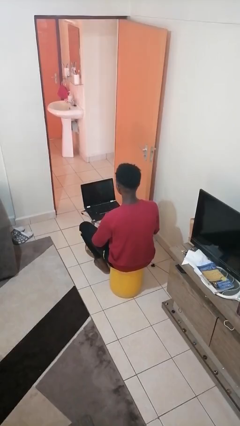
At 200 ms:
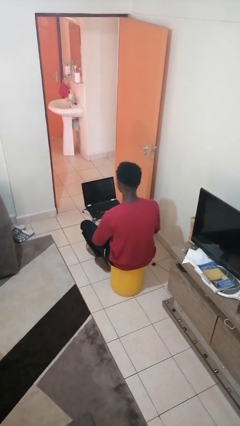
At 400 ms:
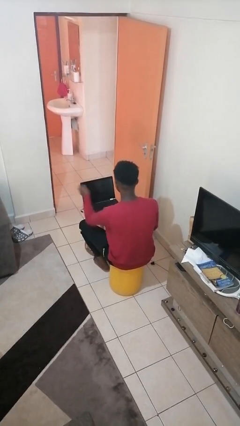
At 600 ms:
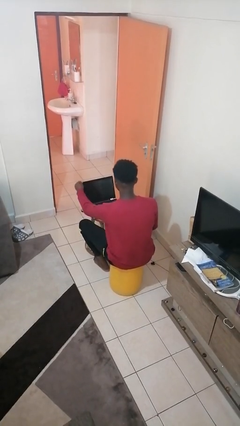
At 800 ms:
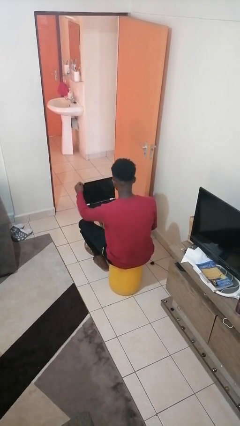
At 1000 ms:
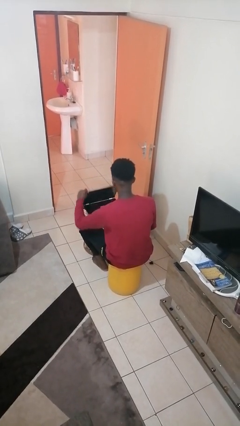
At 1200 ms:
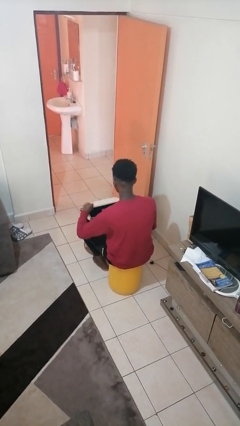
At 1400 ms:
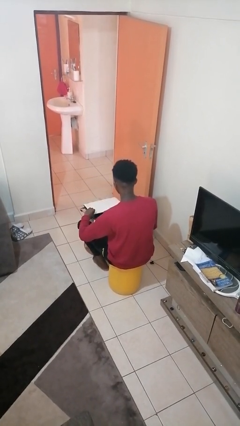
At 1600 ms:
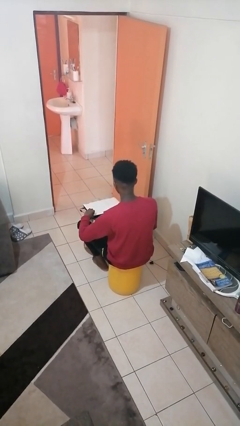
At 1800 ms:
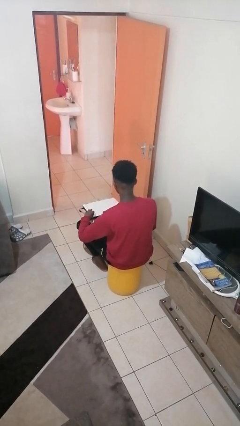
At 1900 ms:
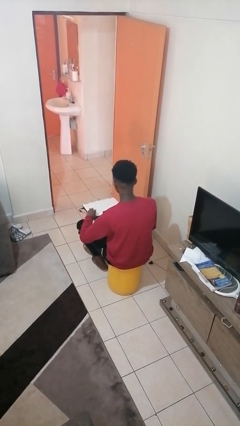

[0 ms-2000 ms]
person closes laptop

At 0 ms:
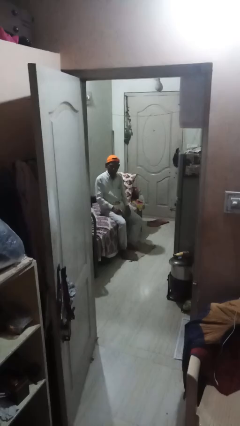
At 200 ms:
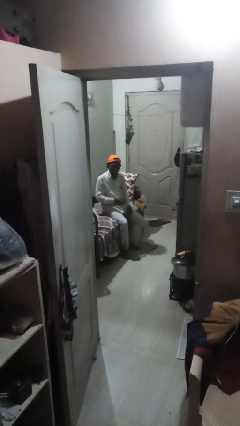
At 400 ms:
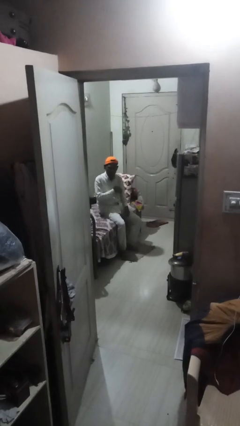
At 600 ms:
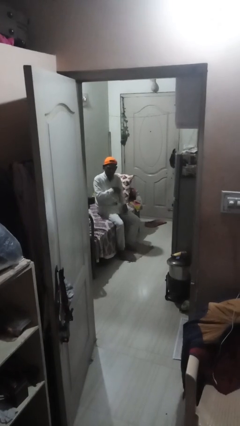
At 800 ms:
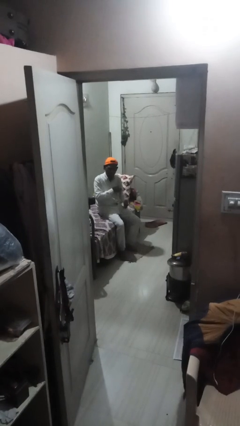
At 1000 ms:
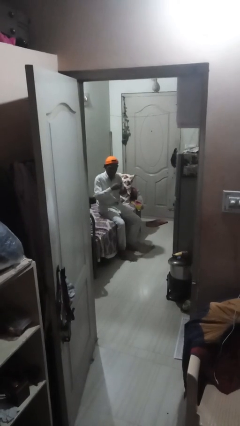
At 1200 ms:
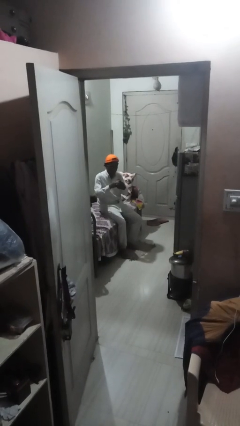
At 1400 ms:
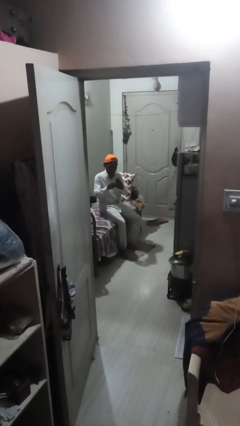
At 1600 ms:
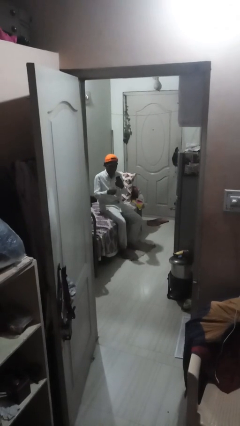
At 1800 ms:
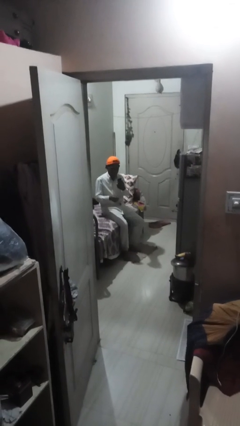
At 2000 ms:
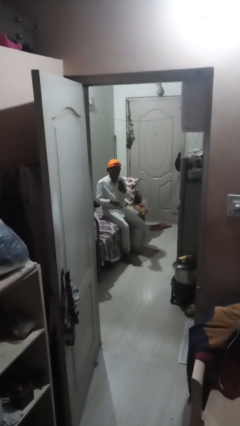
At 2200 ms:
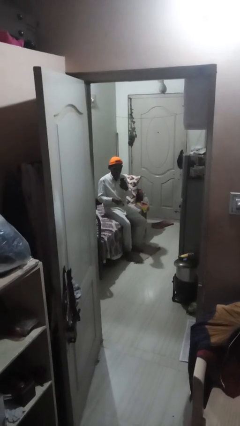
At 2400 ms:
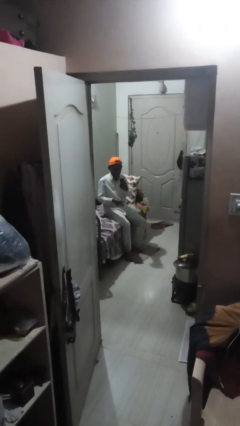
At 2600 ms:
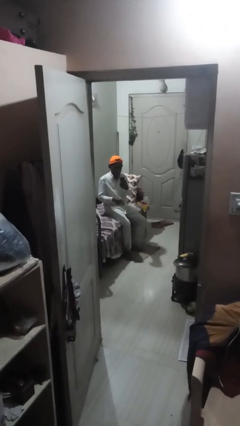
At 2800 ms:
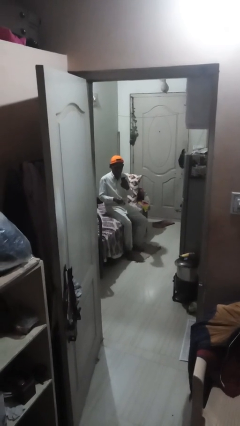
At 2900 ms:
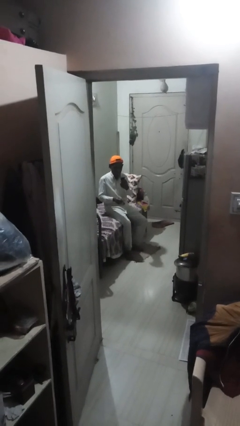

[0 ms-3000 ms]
person takes phone from pocket

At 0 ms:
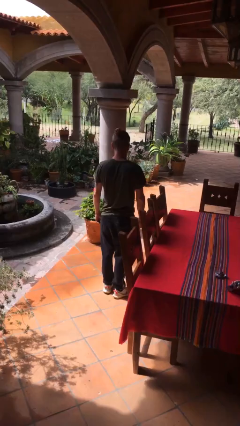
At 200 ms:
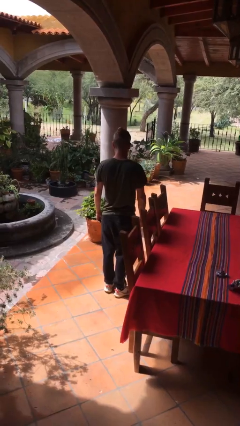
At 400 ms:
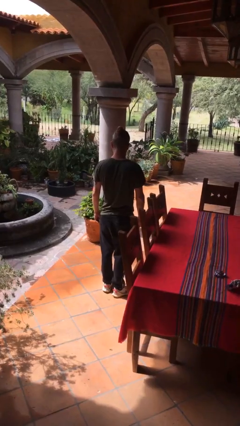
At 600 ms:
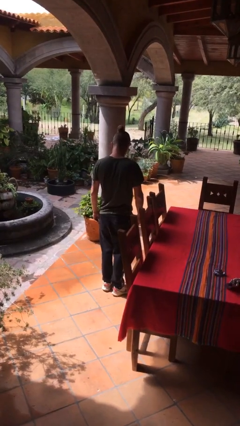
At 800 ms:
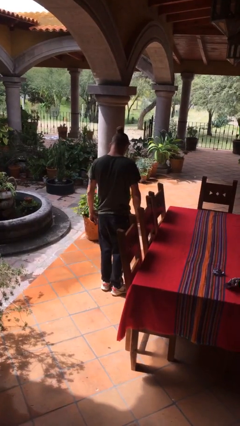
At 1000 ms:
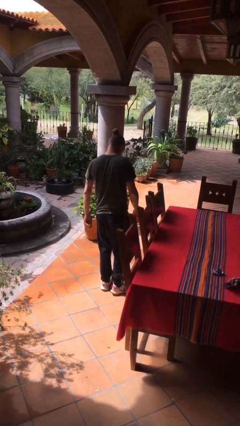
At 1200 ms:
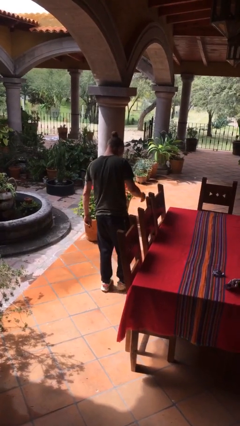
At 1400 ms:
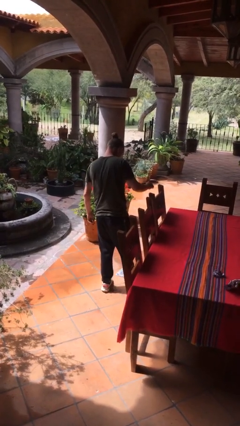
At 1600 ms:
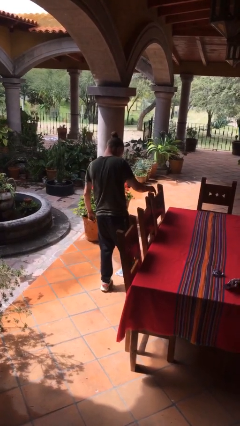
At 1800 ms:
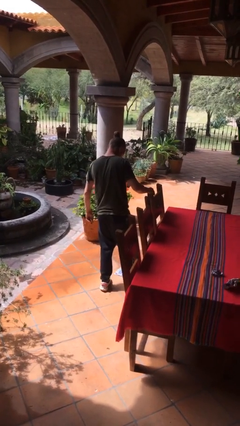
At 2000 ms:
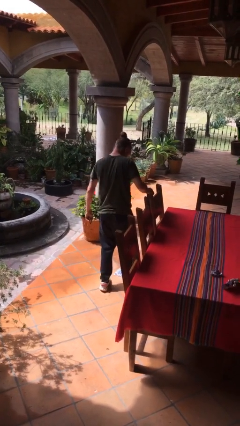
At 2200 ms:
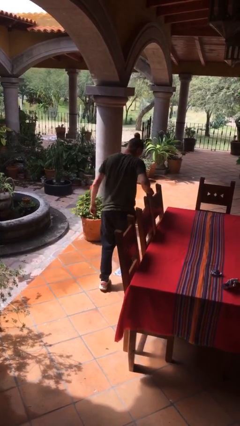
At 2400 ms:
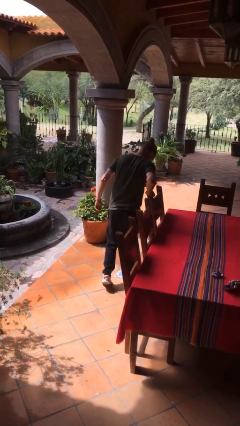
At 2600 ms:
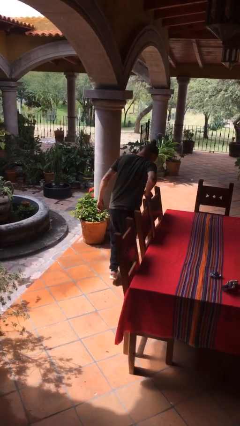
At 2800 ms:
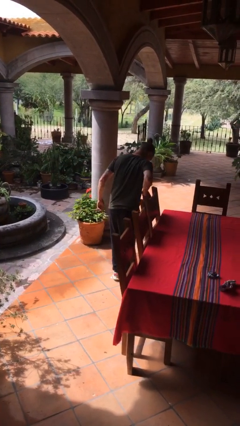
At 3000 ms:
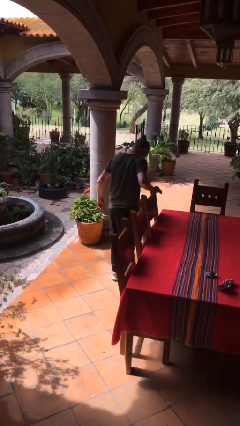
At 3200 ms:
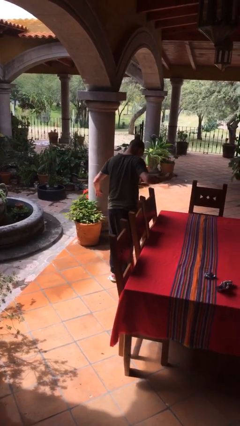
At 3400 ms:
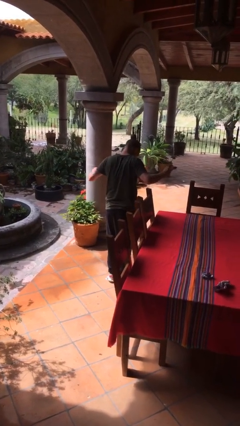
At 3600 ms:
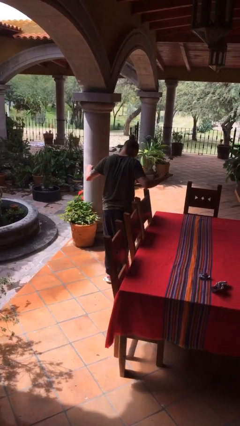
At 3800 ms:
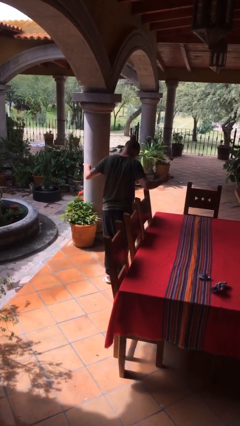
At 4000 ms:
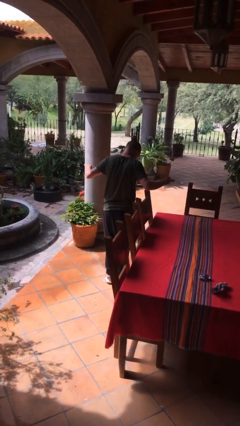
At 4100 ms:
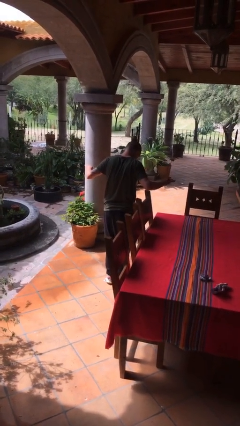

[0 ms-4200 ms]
person uses bodyweight scale

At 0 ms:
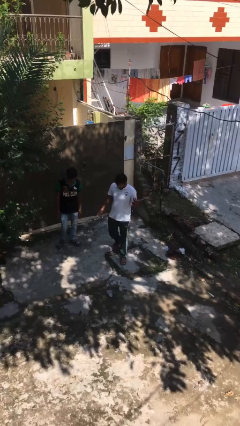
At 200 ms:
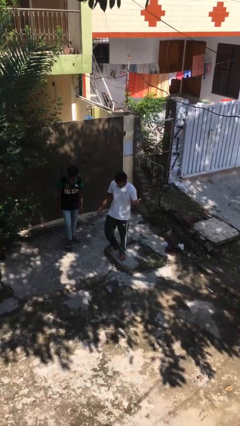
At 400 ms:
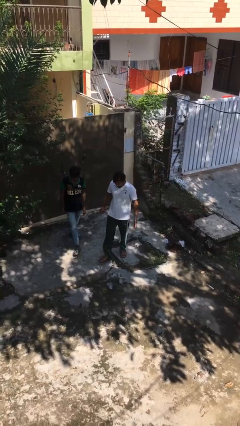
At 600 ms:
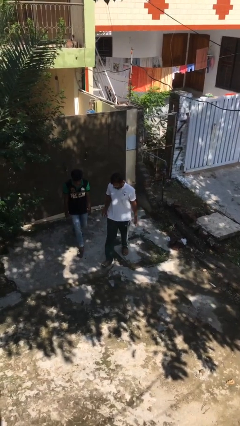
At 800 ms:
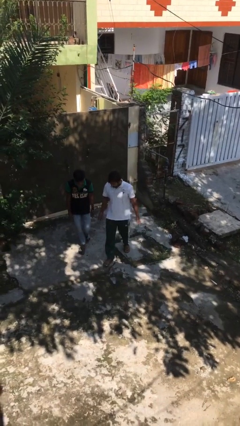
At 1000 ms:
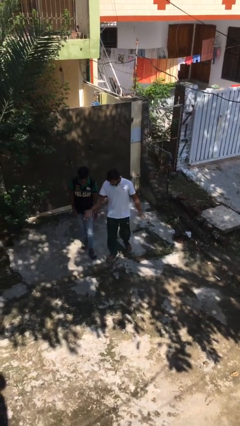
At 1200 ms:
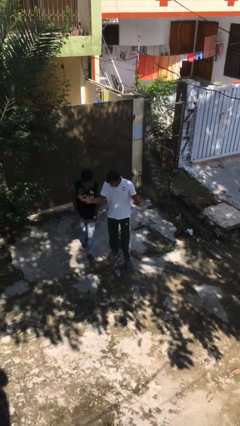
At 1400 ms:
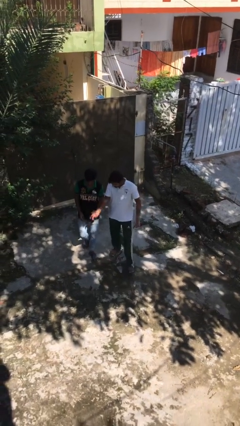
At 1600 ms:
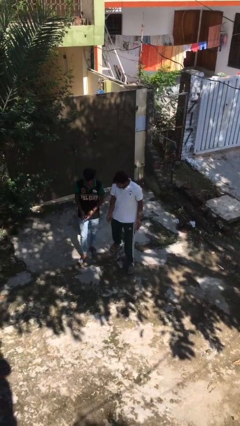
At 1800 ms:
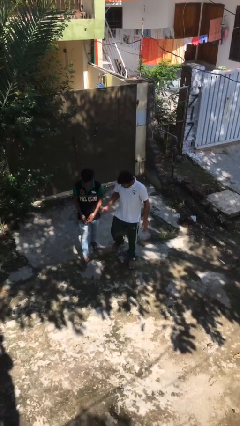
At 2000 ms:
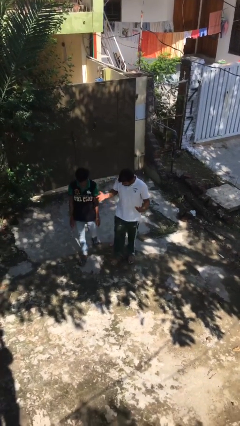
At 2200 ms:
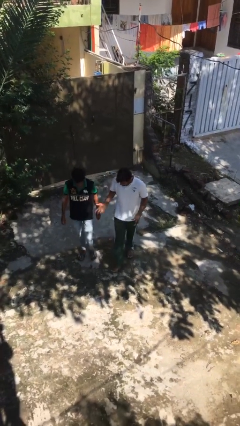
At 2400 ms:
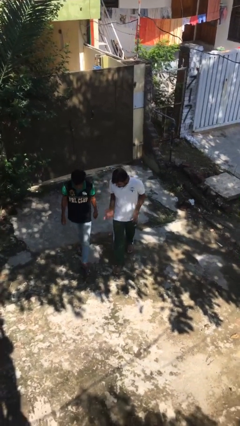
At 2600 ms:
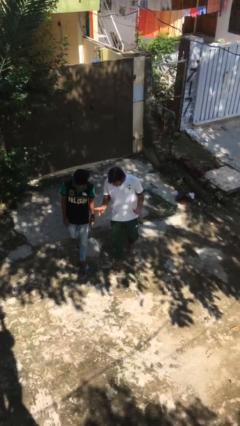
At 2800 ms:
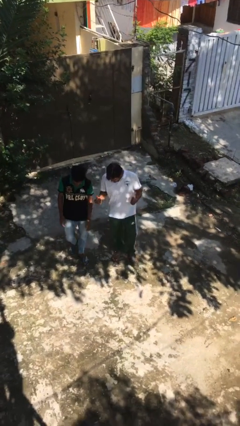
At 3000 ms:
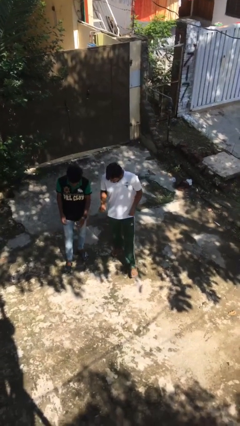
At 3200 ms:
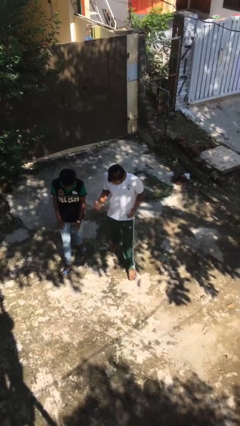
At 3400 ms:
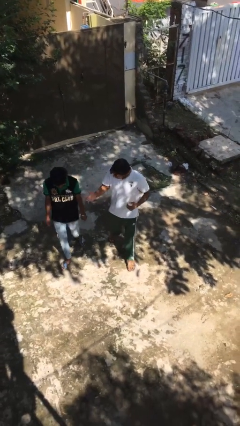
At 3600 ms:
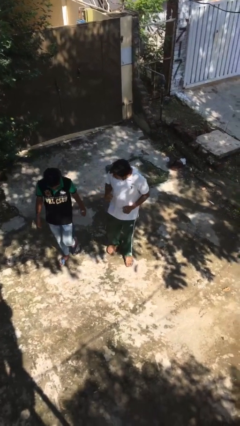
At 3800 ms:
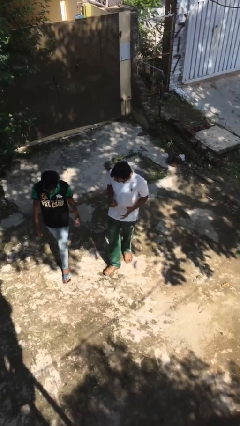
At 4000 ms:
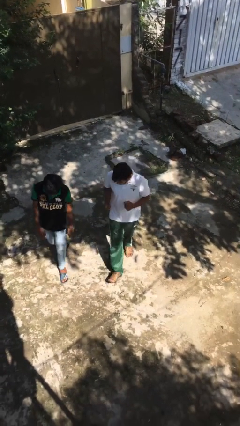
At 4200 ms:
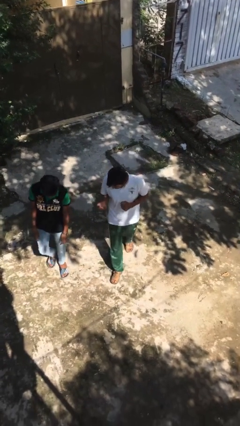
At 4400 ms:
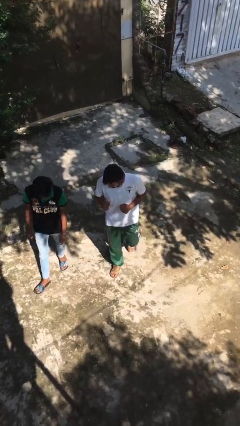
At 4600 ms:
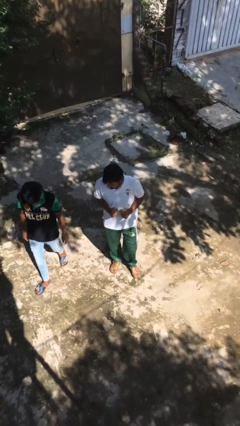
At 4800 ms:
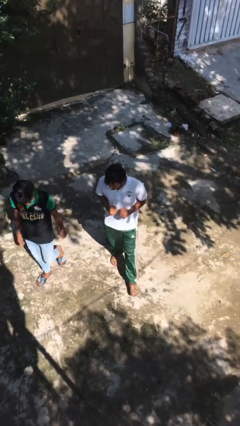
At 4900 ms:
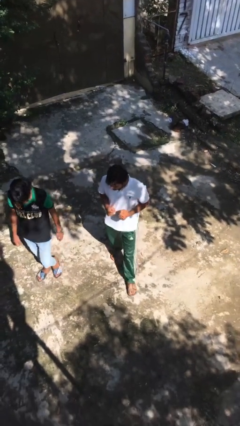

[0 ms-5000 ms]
person talks to person

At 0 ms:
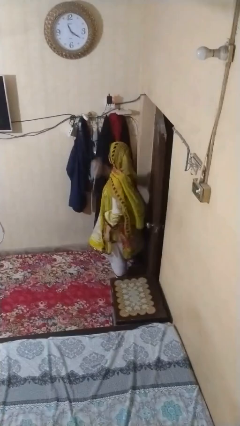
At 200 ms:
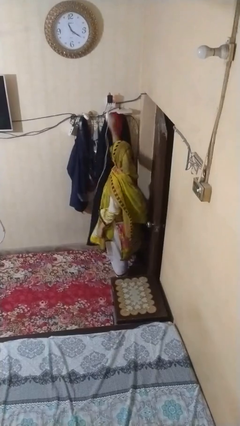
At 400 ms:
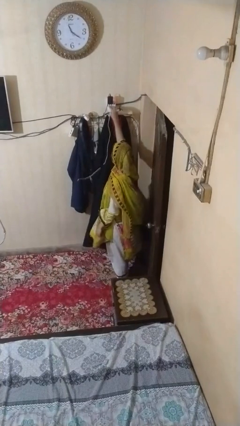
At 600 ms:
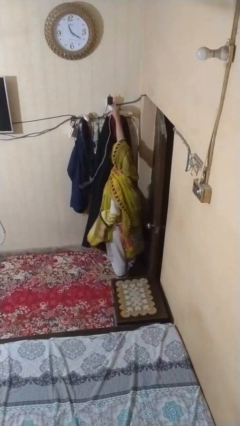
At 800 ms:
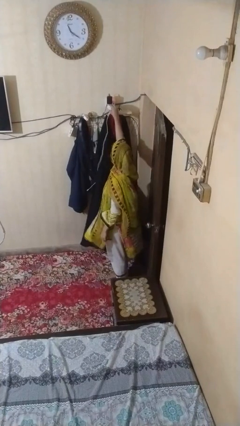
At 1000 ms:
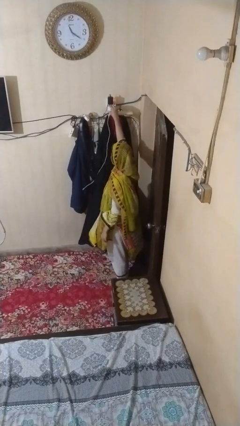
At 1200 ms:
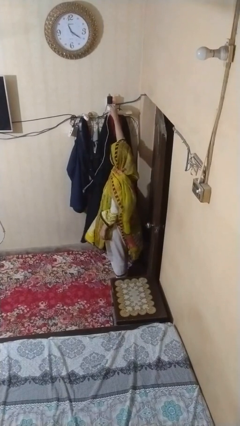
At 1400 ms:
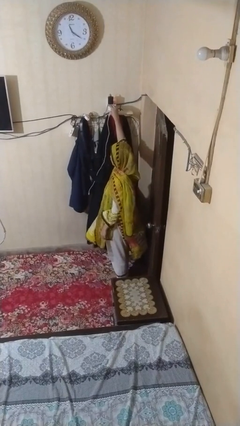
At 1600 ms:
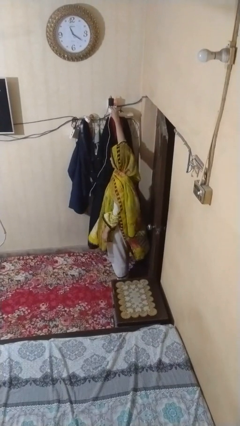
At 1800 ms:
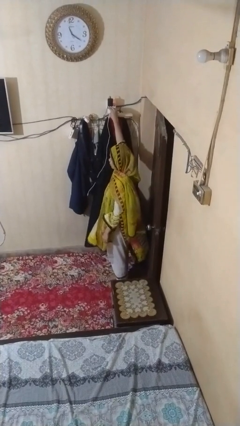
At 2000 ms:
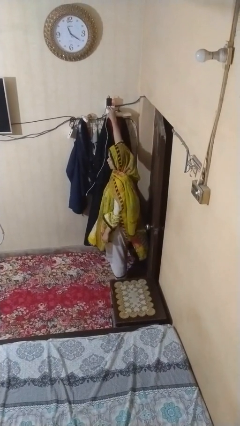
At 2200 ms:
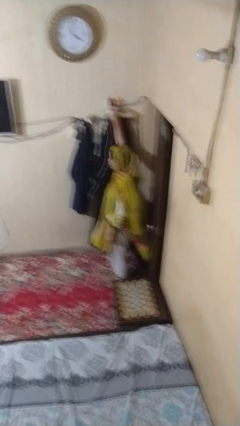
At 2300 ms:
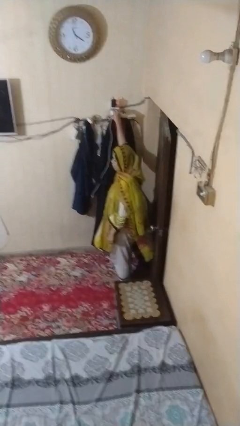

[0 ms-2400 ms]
person plugs into electrical socket

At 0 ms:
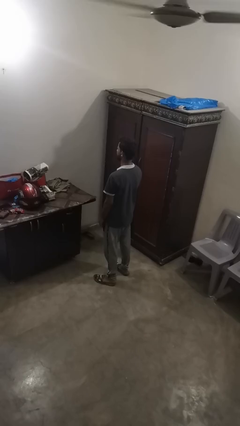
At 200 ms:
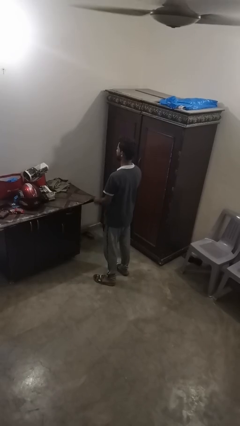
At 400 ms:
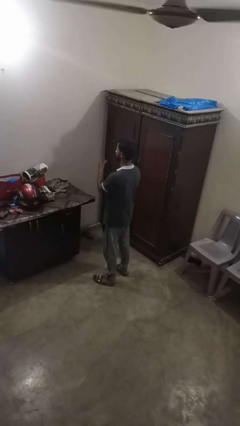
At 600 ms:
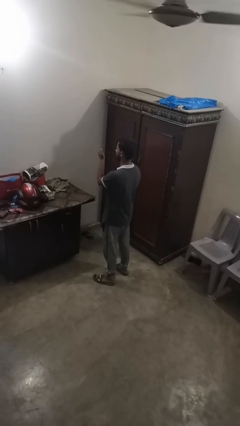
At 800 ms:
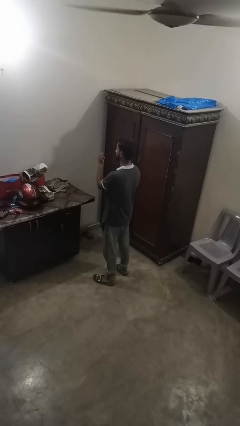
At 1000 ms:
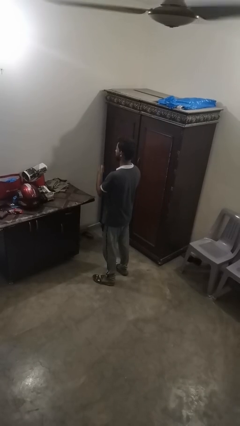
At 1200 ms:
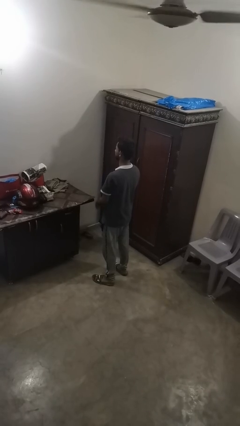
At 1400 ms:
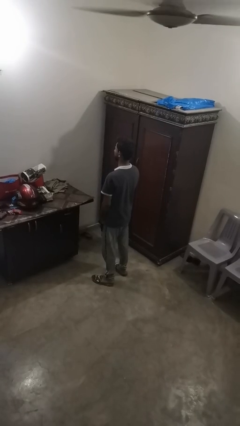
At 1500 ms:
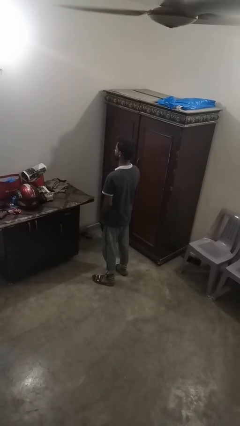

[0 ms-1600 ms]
person snaps fingers
